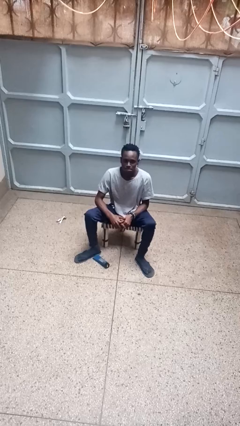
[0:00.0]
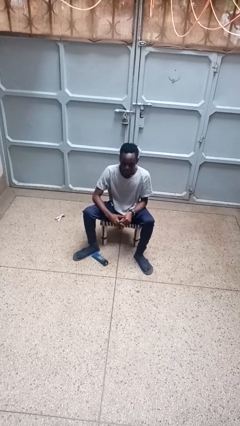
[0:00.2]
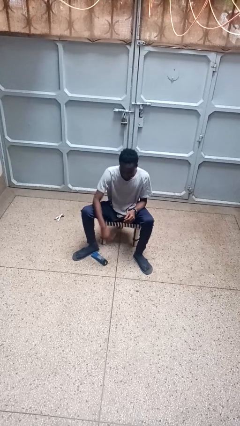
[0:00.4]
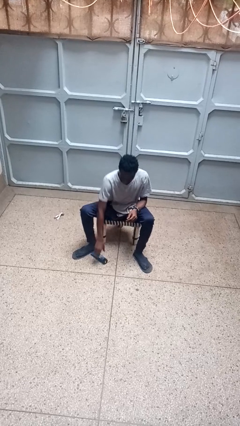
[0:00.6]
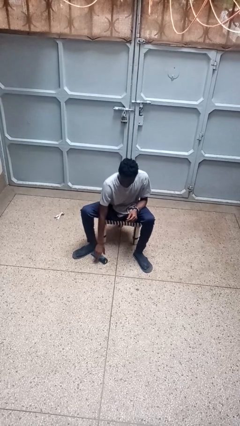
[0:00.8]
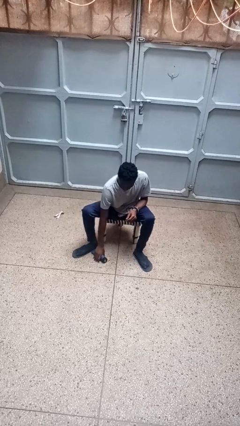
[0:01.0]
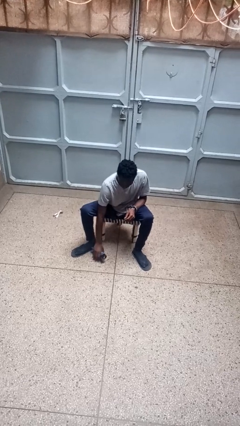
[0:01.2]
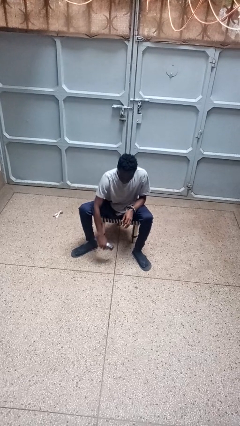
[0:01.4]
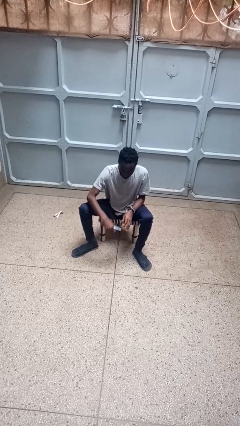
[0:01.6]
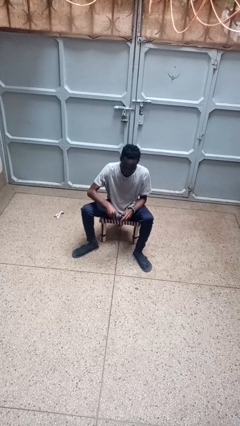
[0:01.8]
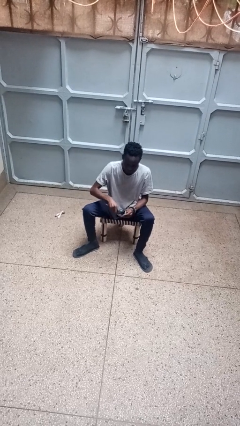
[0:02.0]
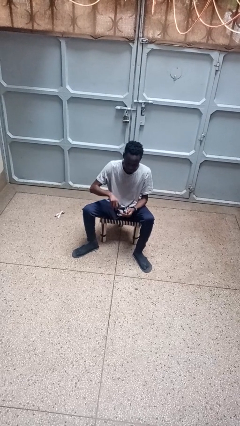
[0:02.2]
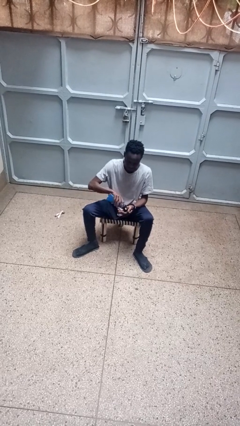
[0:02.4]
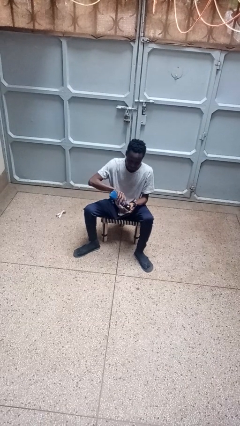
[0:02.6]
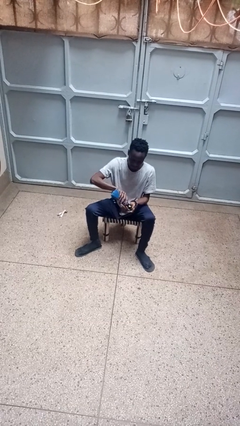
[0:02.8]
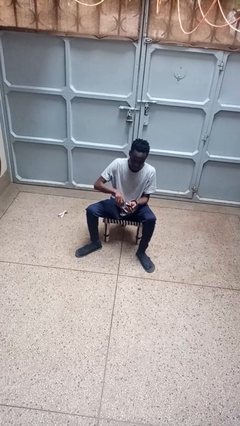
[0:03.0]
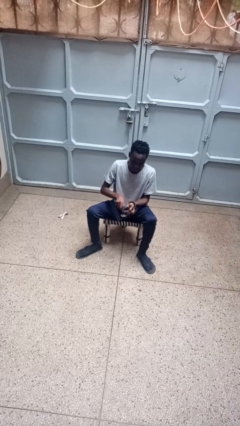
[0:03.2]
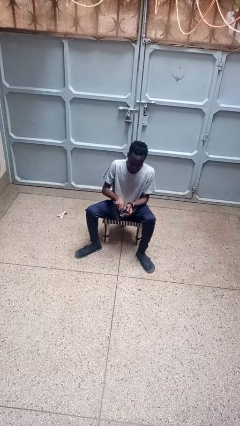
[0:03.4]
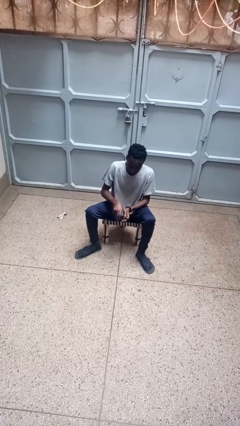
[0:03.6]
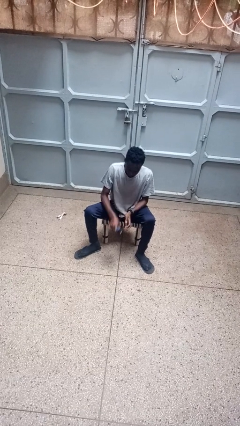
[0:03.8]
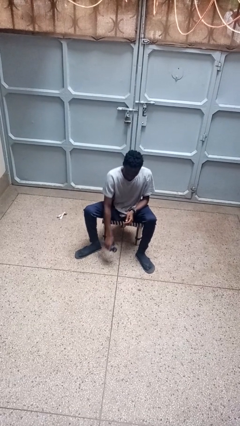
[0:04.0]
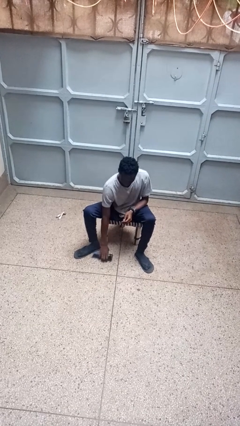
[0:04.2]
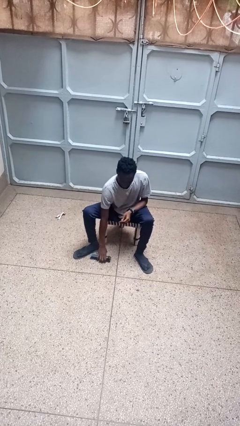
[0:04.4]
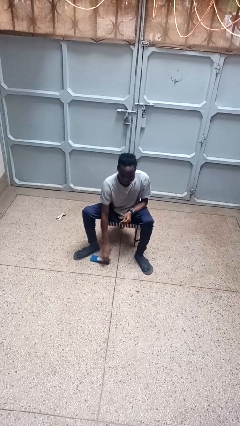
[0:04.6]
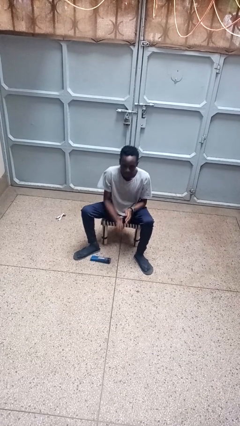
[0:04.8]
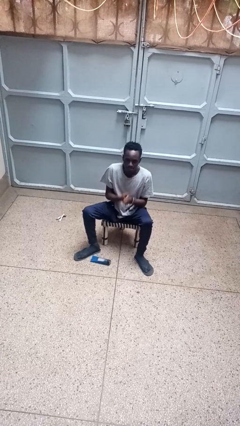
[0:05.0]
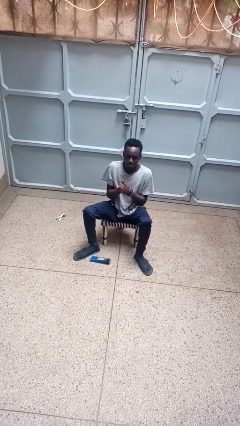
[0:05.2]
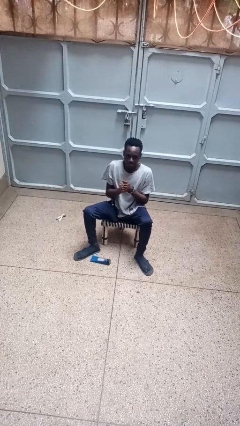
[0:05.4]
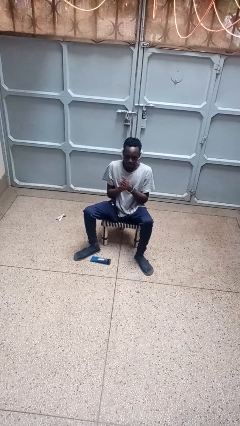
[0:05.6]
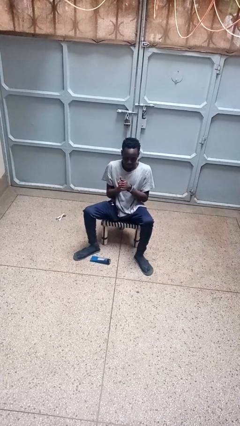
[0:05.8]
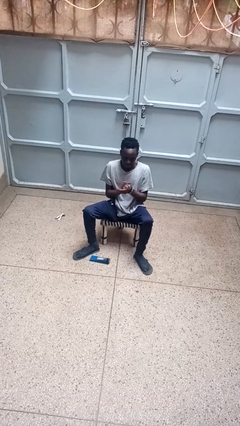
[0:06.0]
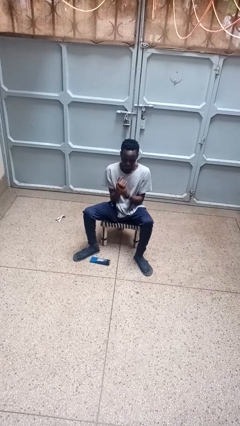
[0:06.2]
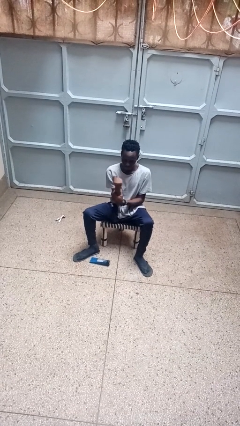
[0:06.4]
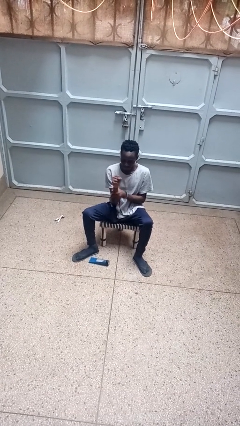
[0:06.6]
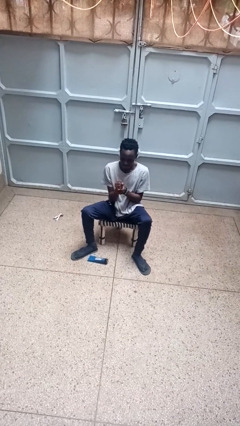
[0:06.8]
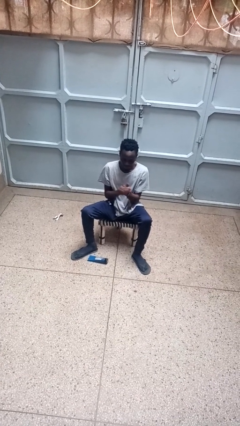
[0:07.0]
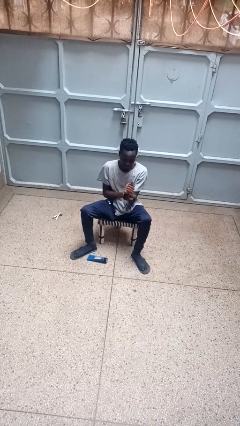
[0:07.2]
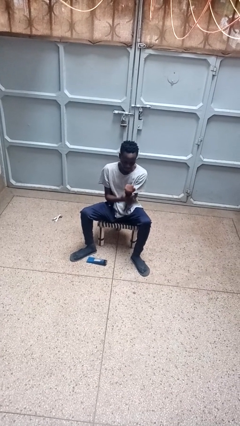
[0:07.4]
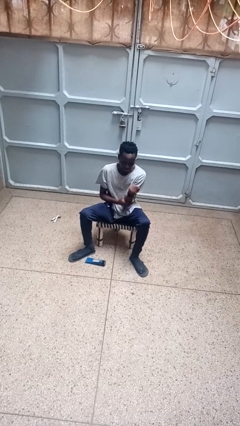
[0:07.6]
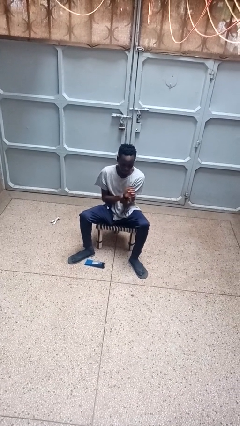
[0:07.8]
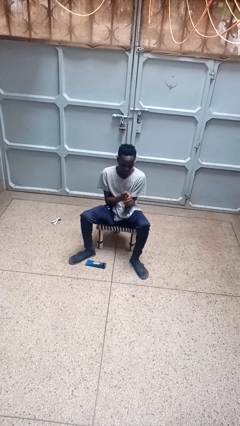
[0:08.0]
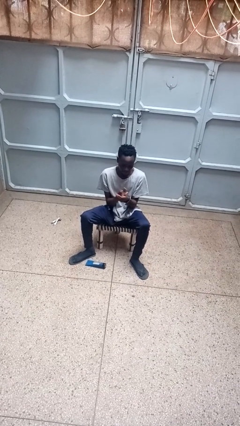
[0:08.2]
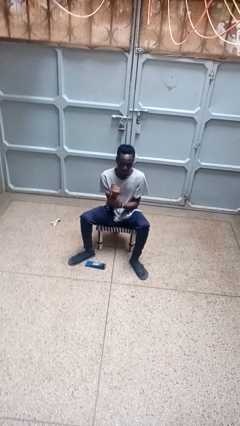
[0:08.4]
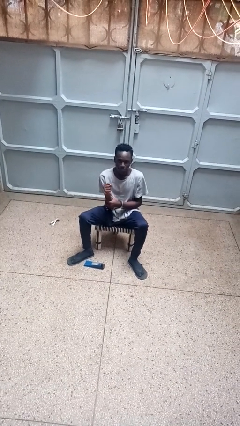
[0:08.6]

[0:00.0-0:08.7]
person applies facial moisturizer

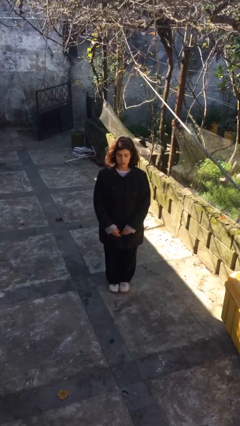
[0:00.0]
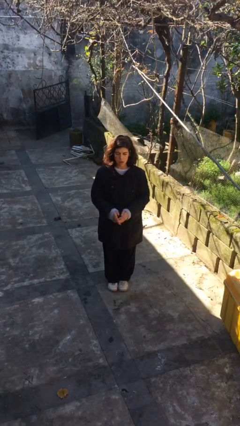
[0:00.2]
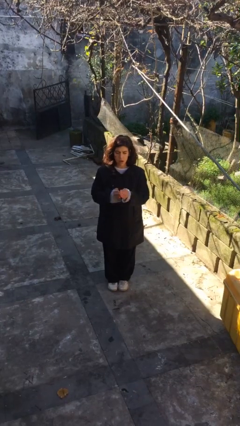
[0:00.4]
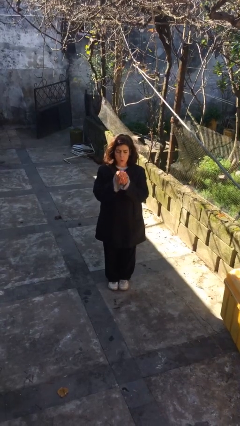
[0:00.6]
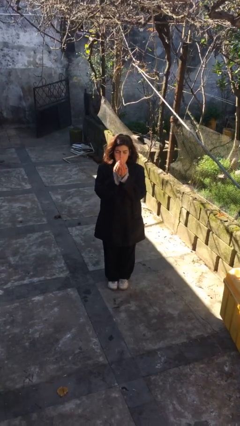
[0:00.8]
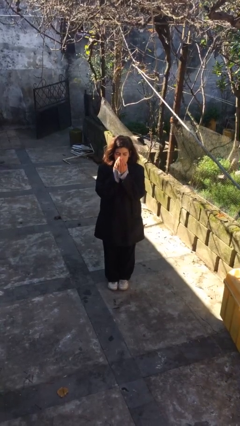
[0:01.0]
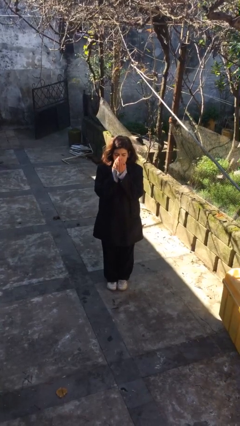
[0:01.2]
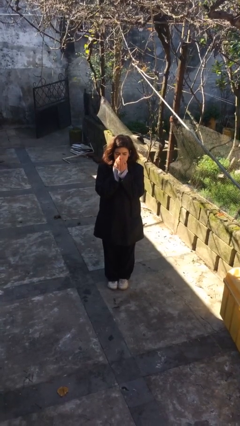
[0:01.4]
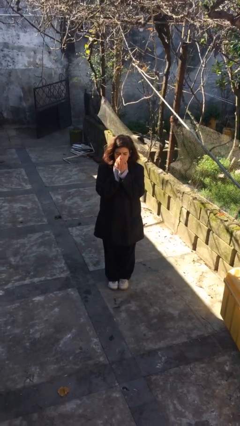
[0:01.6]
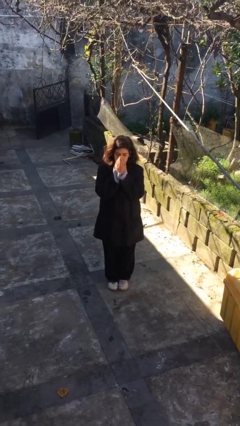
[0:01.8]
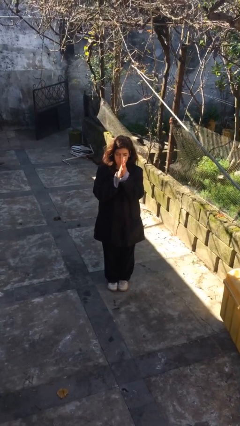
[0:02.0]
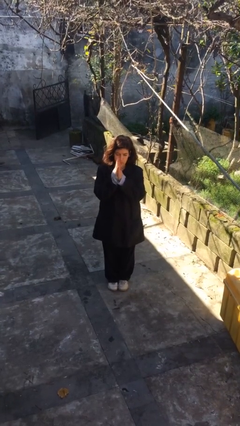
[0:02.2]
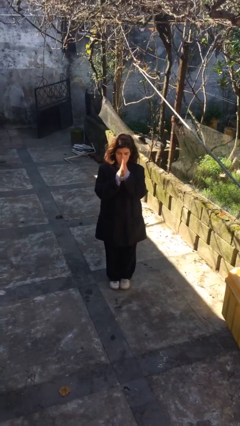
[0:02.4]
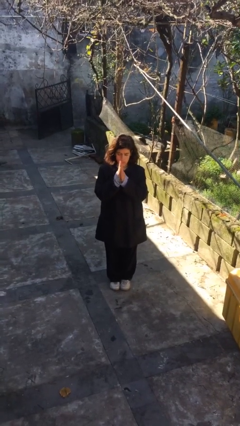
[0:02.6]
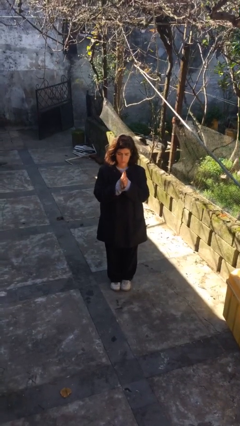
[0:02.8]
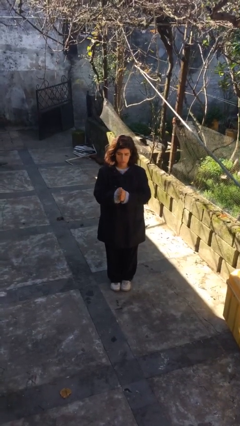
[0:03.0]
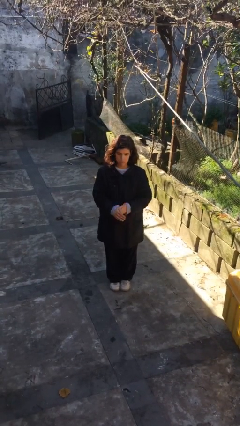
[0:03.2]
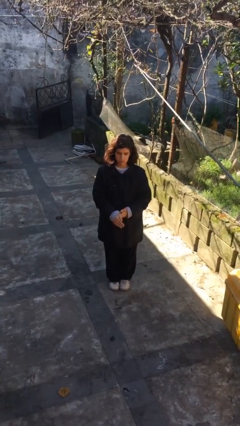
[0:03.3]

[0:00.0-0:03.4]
person blows into hands

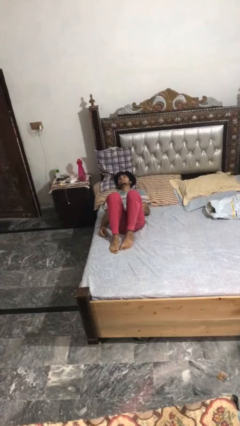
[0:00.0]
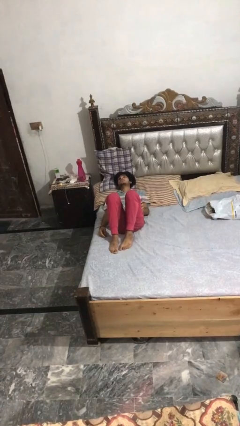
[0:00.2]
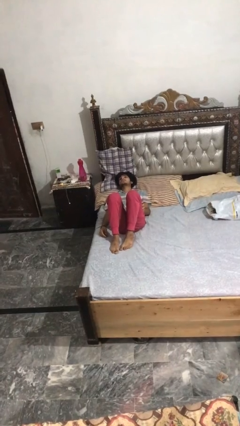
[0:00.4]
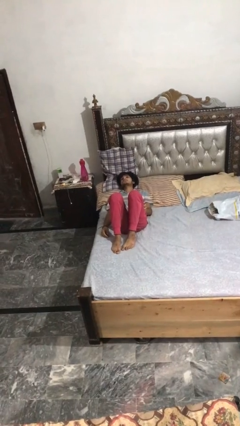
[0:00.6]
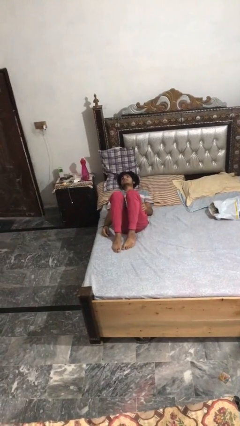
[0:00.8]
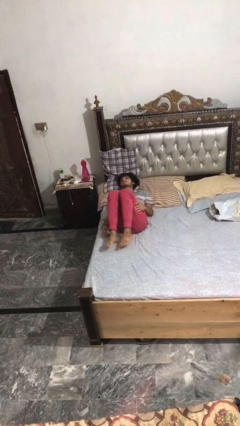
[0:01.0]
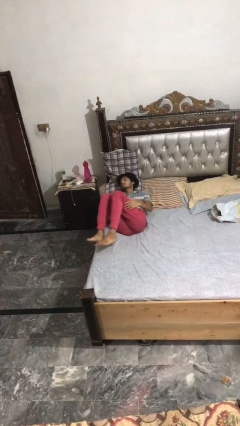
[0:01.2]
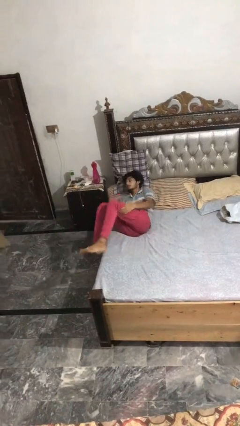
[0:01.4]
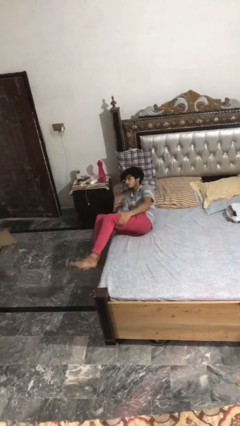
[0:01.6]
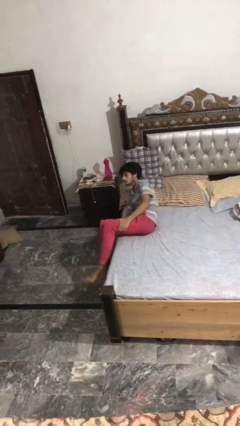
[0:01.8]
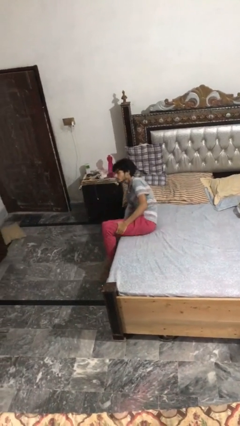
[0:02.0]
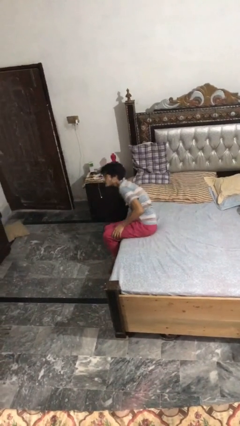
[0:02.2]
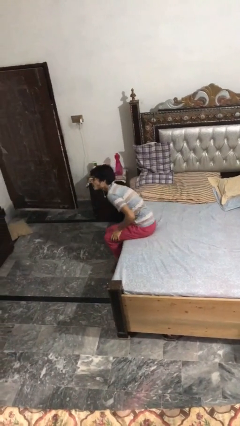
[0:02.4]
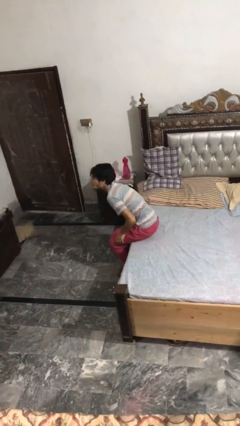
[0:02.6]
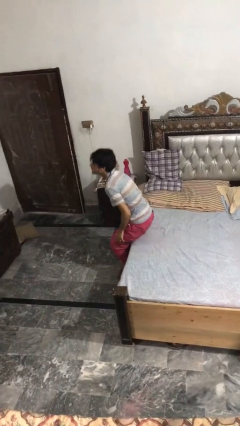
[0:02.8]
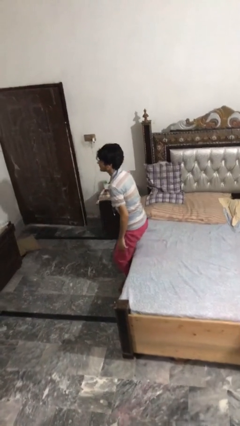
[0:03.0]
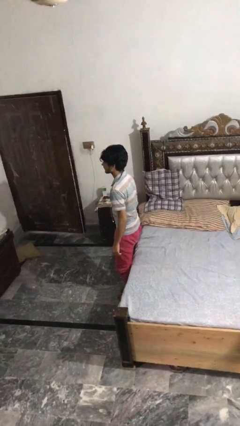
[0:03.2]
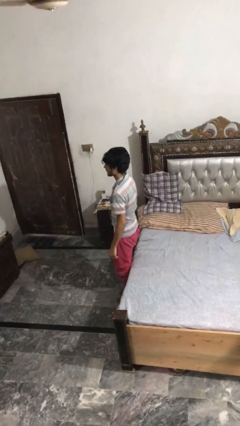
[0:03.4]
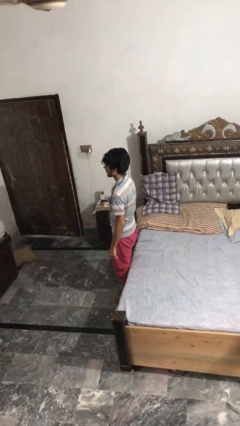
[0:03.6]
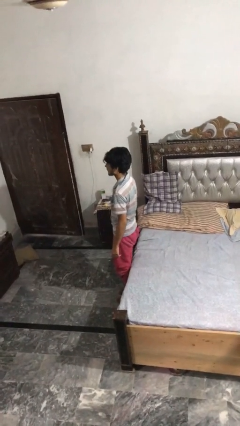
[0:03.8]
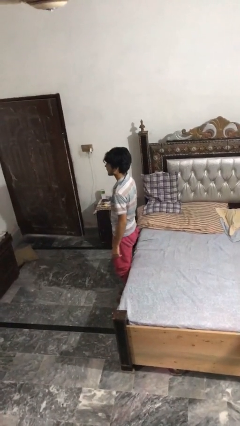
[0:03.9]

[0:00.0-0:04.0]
person stands up

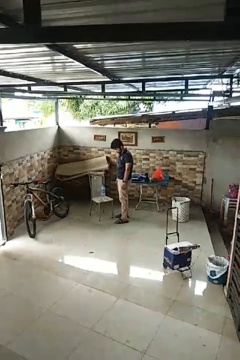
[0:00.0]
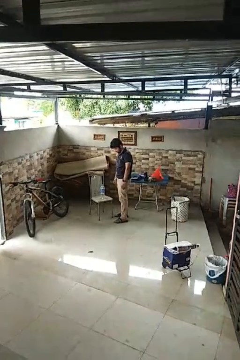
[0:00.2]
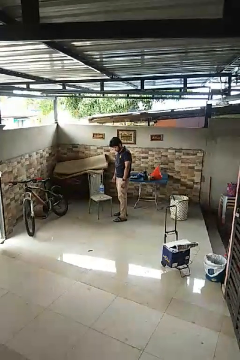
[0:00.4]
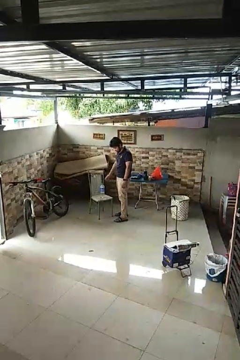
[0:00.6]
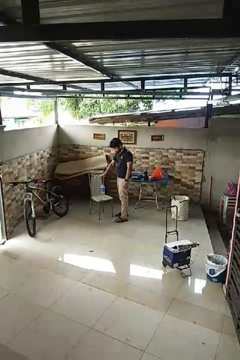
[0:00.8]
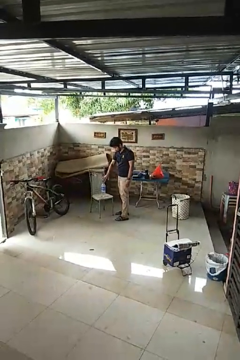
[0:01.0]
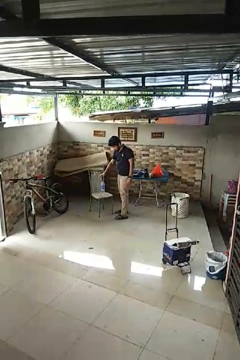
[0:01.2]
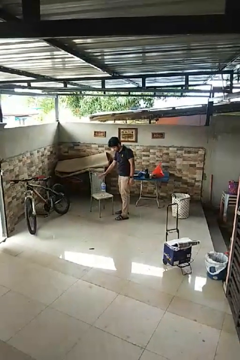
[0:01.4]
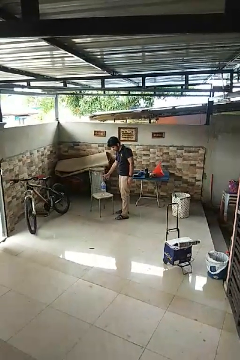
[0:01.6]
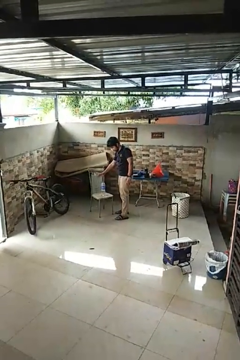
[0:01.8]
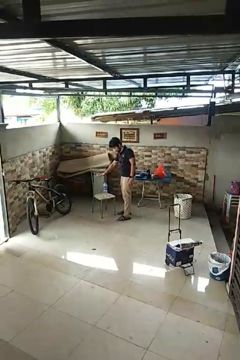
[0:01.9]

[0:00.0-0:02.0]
person waves hand over object
